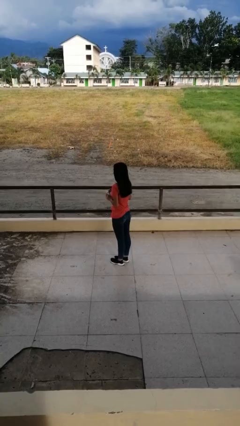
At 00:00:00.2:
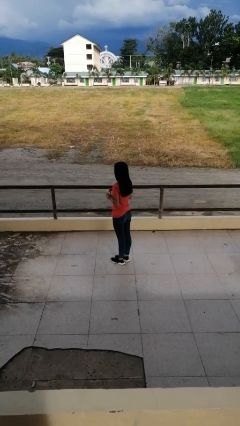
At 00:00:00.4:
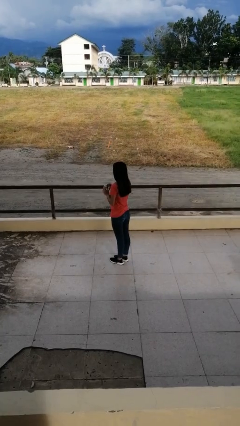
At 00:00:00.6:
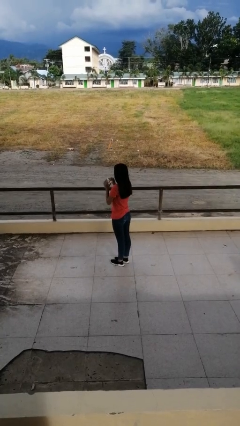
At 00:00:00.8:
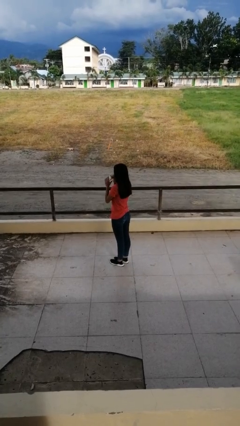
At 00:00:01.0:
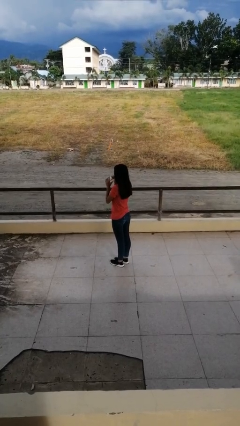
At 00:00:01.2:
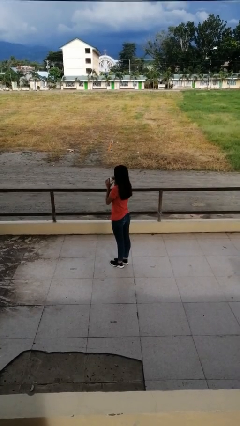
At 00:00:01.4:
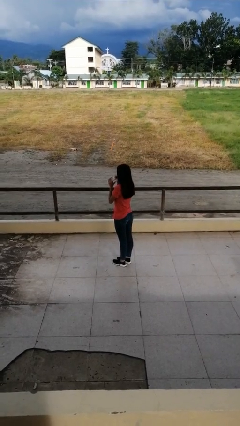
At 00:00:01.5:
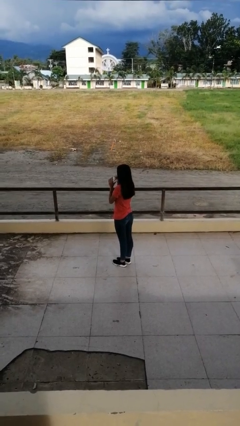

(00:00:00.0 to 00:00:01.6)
person drinks from straw

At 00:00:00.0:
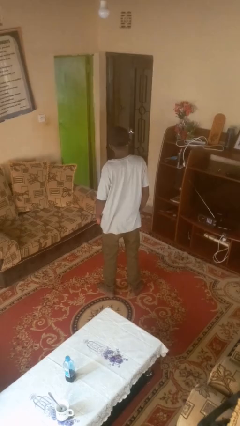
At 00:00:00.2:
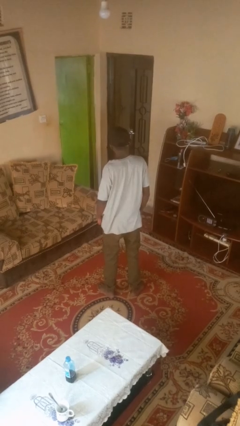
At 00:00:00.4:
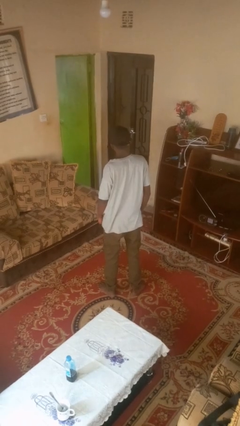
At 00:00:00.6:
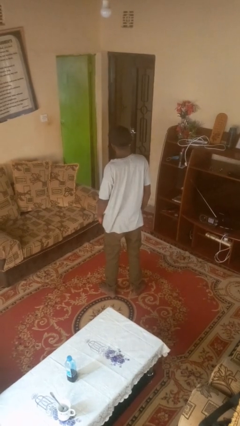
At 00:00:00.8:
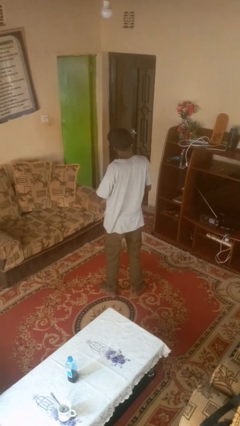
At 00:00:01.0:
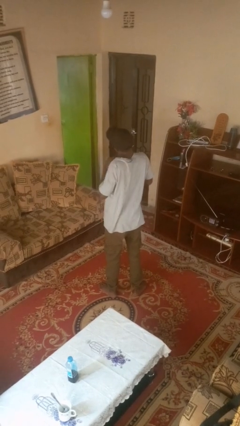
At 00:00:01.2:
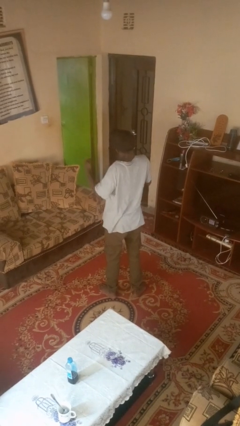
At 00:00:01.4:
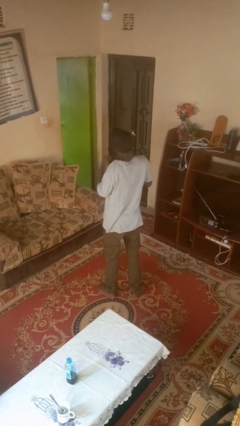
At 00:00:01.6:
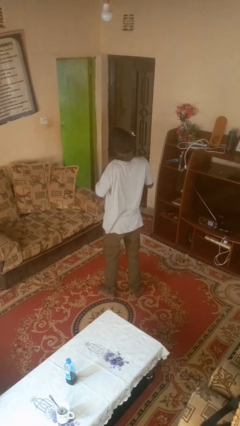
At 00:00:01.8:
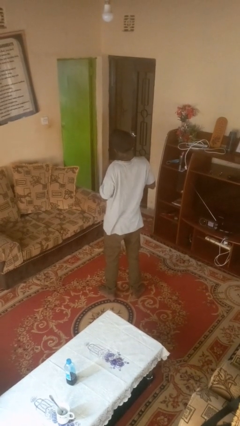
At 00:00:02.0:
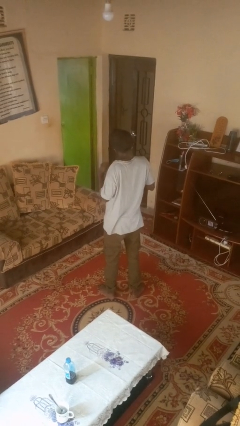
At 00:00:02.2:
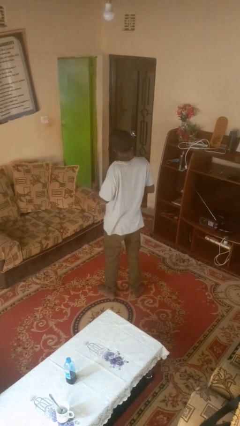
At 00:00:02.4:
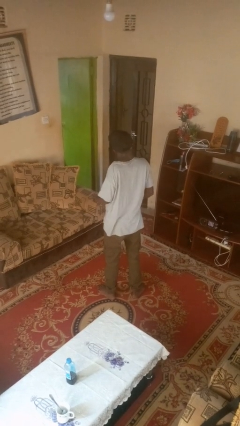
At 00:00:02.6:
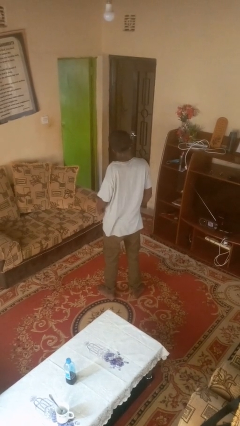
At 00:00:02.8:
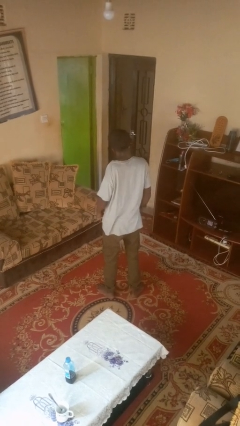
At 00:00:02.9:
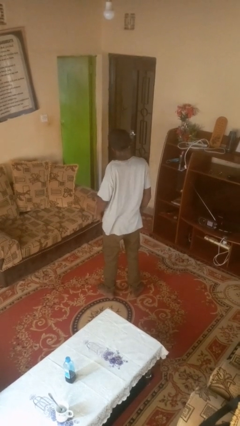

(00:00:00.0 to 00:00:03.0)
person drums on chest

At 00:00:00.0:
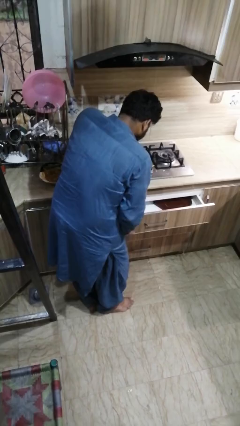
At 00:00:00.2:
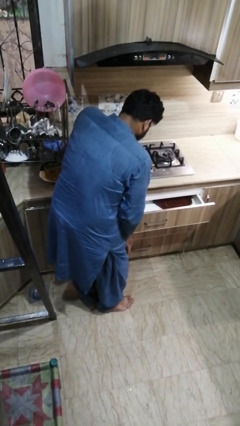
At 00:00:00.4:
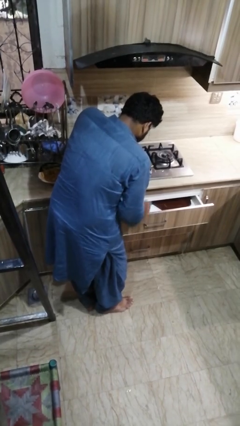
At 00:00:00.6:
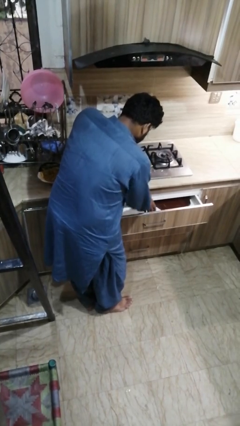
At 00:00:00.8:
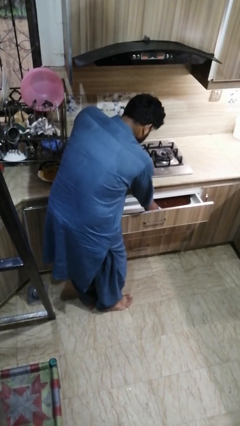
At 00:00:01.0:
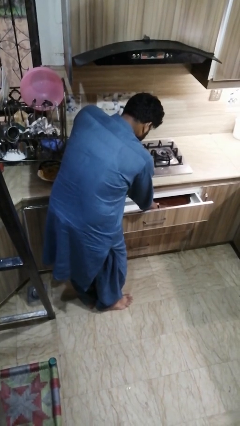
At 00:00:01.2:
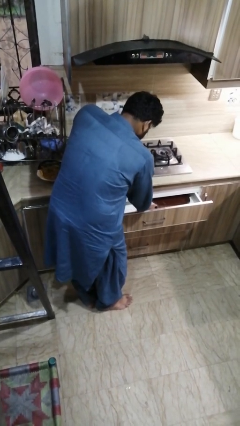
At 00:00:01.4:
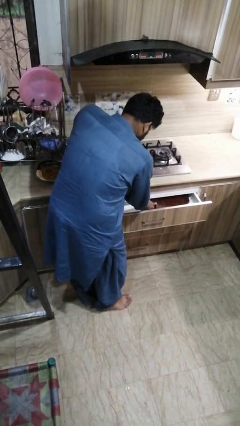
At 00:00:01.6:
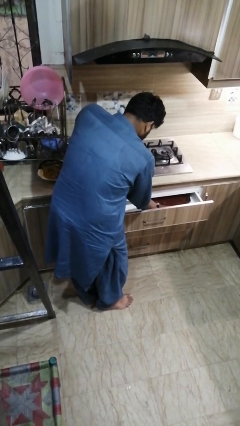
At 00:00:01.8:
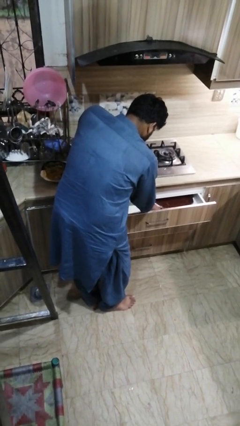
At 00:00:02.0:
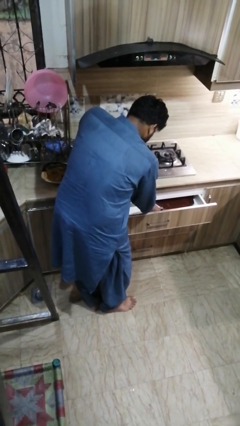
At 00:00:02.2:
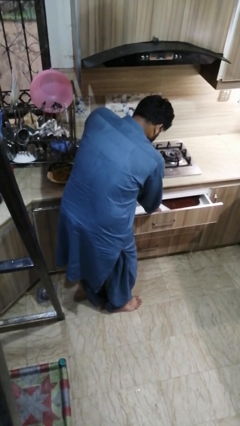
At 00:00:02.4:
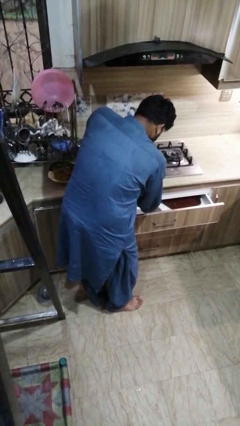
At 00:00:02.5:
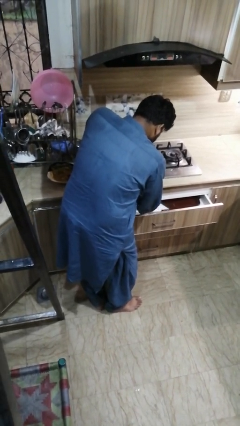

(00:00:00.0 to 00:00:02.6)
person searches in kitchen drawer

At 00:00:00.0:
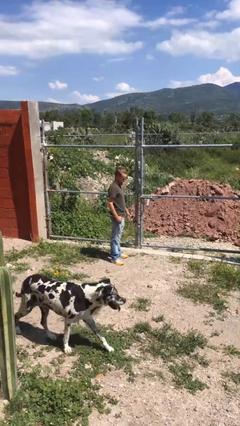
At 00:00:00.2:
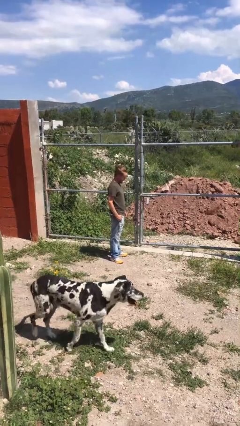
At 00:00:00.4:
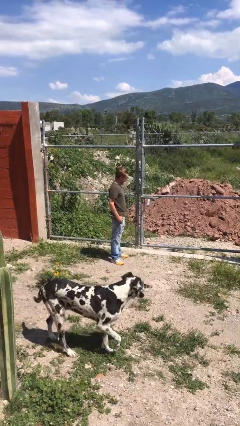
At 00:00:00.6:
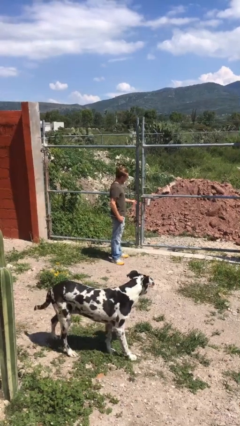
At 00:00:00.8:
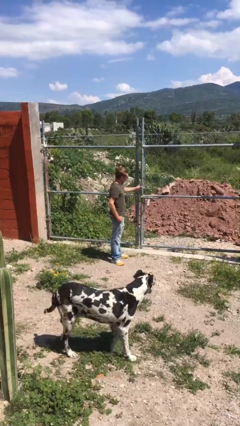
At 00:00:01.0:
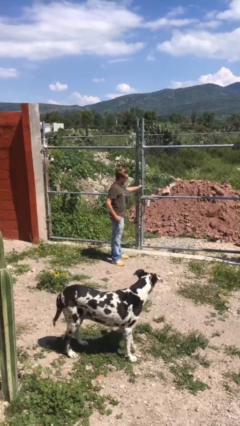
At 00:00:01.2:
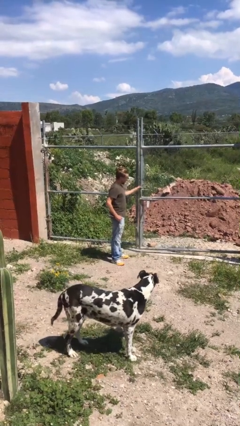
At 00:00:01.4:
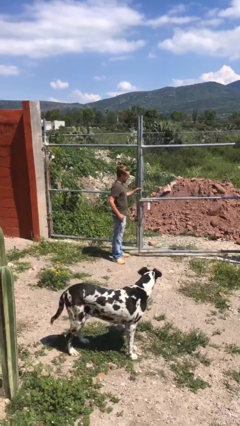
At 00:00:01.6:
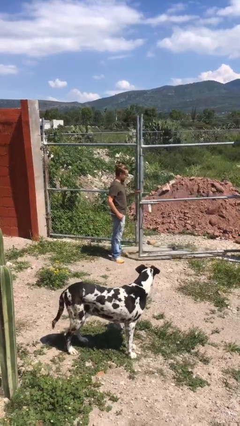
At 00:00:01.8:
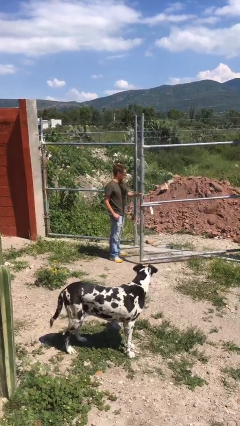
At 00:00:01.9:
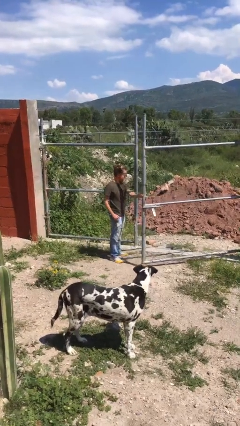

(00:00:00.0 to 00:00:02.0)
person opens gate

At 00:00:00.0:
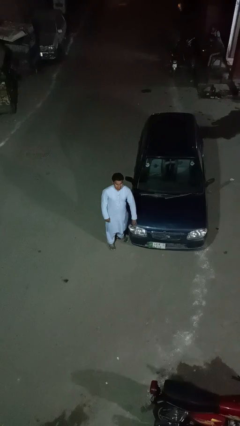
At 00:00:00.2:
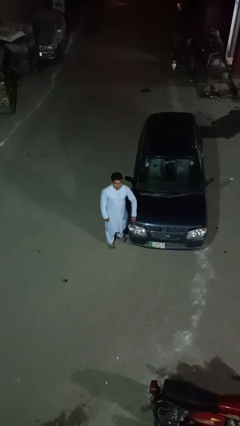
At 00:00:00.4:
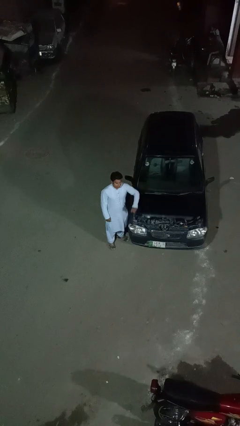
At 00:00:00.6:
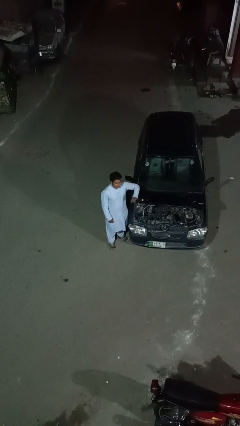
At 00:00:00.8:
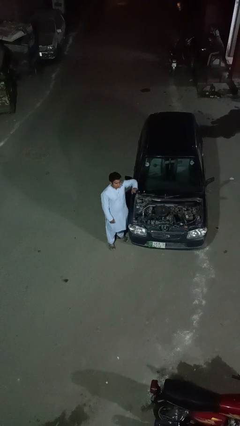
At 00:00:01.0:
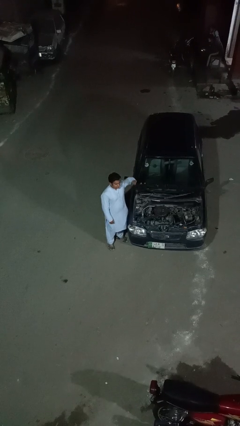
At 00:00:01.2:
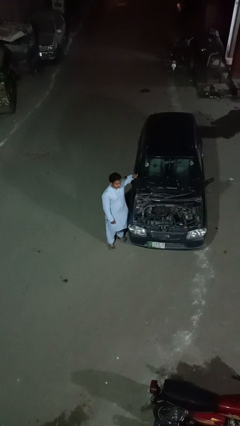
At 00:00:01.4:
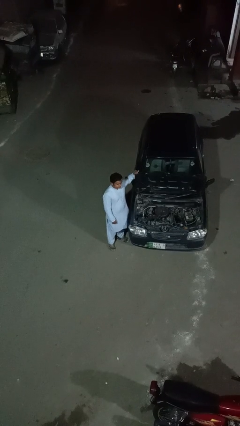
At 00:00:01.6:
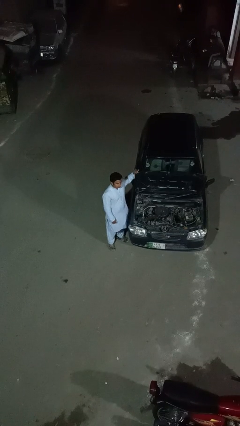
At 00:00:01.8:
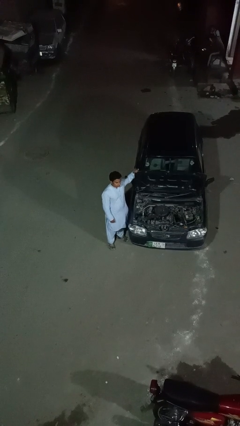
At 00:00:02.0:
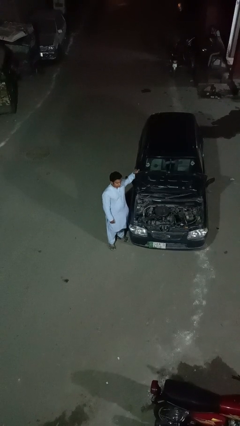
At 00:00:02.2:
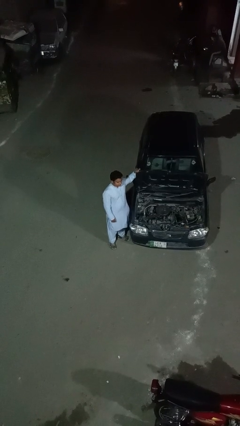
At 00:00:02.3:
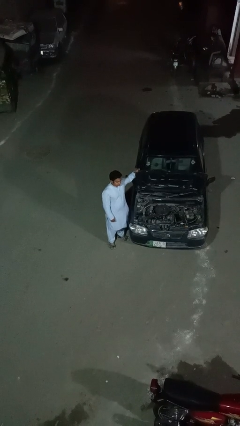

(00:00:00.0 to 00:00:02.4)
person opens car hood

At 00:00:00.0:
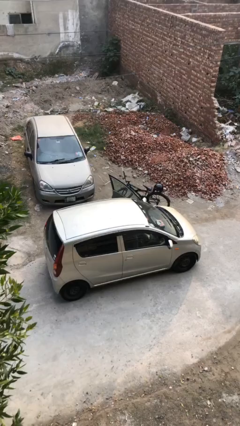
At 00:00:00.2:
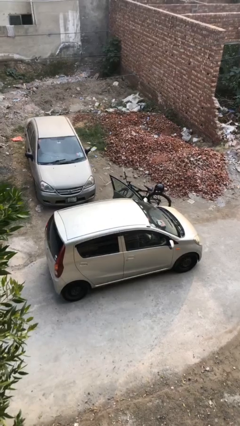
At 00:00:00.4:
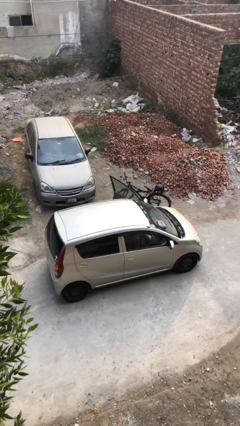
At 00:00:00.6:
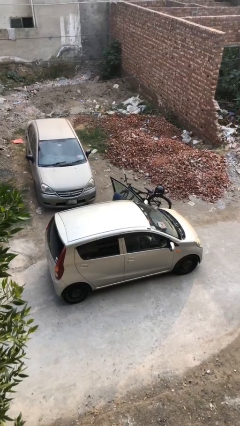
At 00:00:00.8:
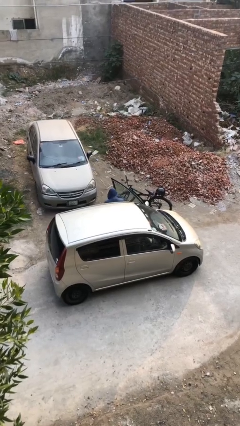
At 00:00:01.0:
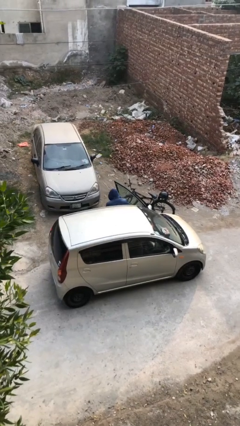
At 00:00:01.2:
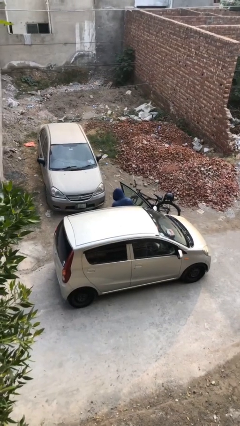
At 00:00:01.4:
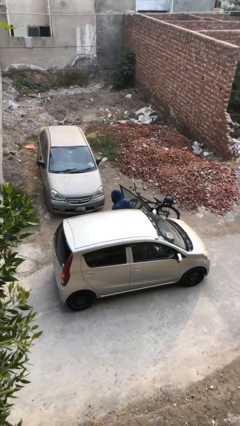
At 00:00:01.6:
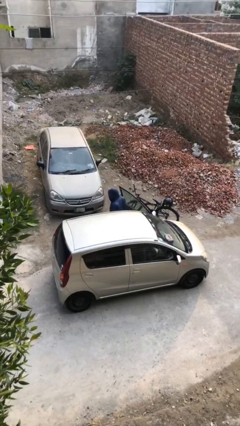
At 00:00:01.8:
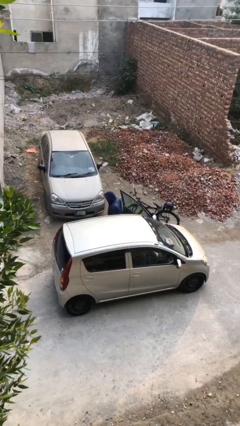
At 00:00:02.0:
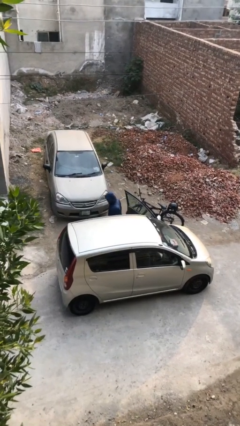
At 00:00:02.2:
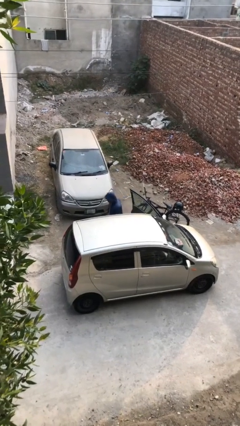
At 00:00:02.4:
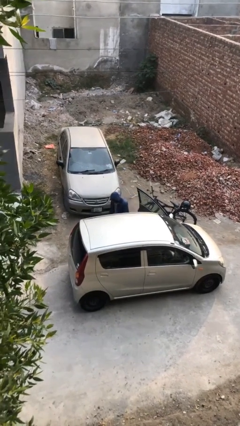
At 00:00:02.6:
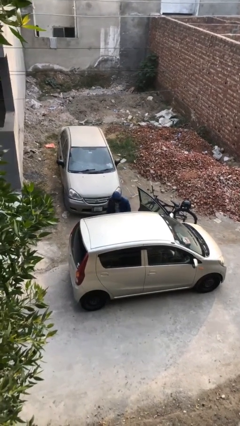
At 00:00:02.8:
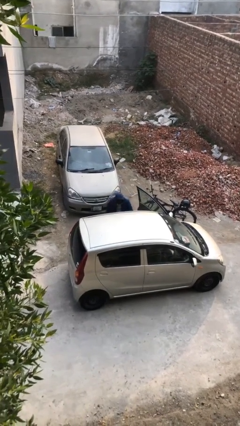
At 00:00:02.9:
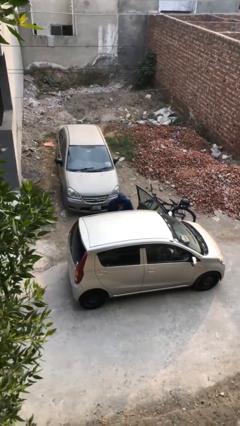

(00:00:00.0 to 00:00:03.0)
person exits car

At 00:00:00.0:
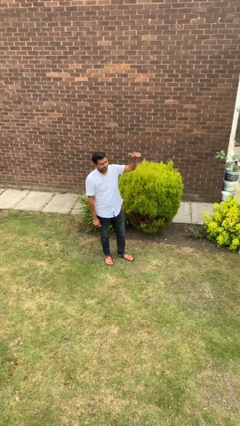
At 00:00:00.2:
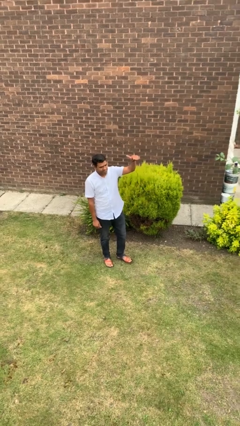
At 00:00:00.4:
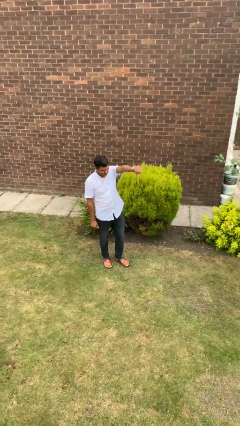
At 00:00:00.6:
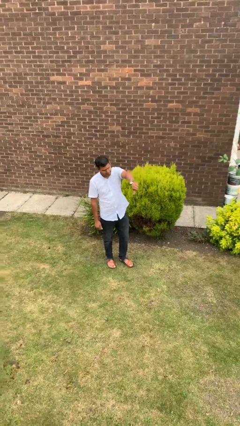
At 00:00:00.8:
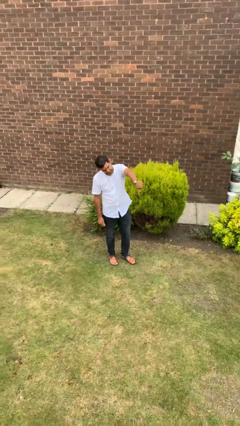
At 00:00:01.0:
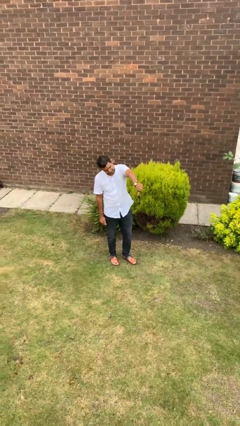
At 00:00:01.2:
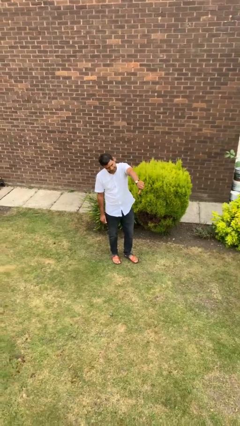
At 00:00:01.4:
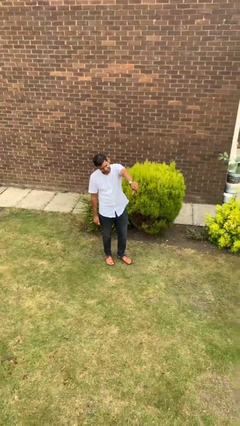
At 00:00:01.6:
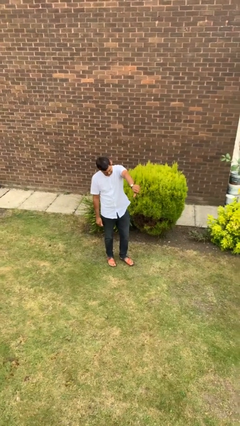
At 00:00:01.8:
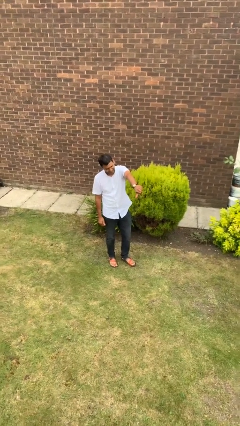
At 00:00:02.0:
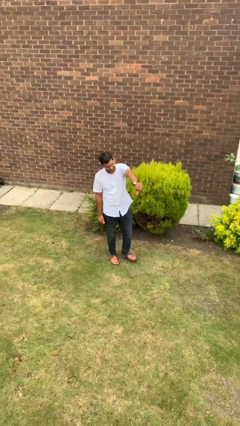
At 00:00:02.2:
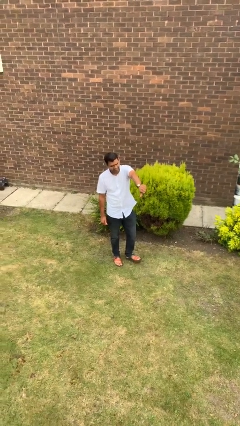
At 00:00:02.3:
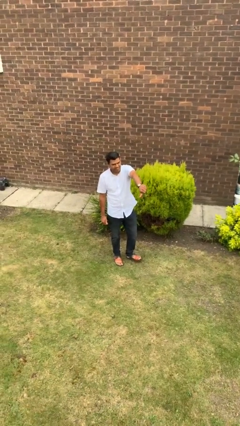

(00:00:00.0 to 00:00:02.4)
person gestures thumbs down
